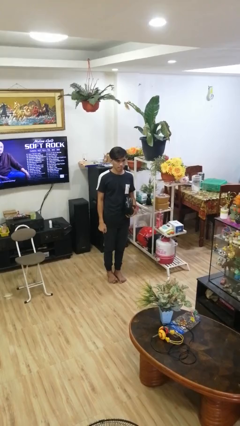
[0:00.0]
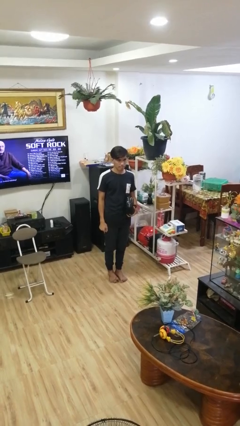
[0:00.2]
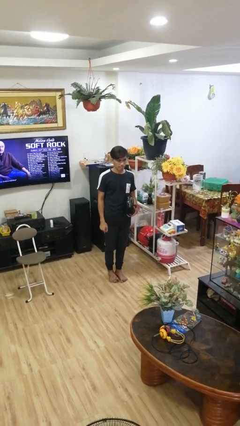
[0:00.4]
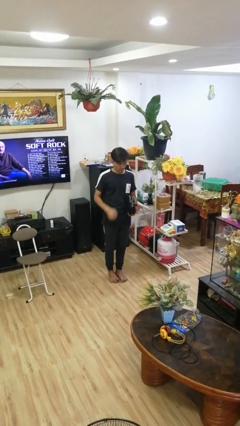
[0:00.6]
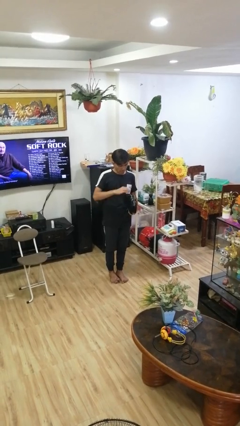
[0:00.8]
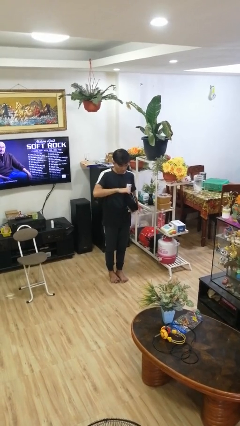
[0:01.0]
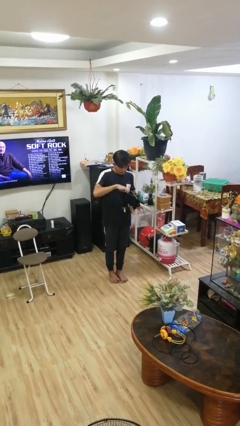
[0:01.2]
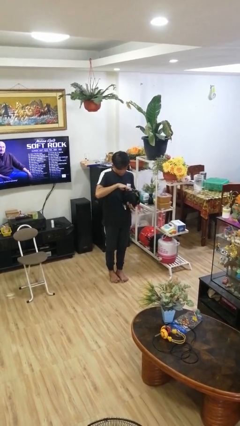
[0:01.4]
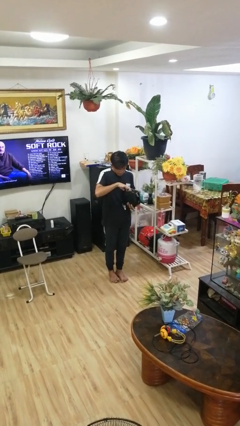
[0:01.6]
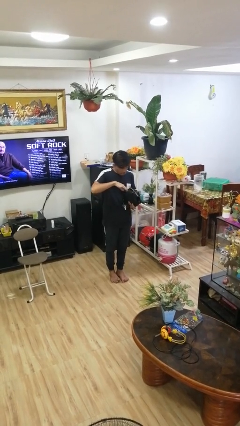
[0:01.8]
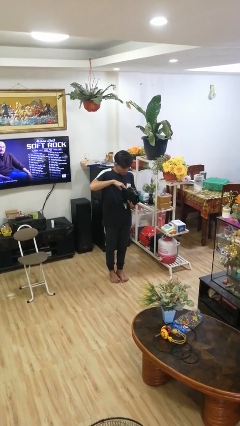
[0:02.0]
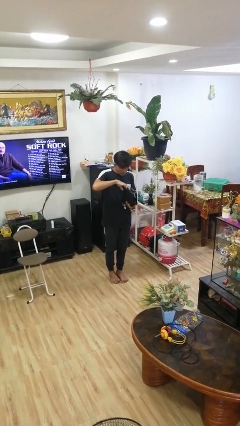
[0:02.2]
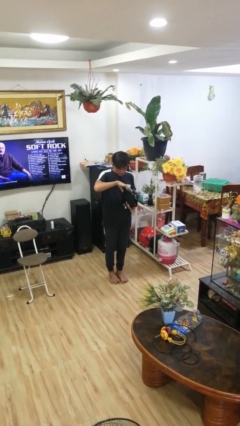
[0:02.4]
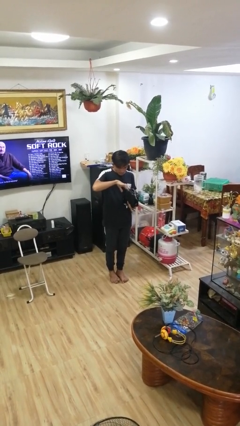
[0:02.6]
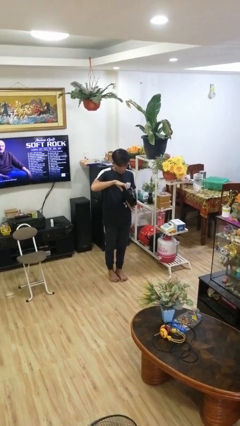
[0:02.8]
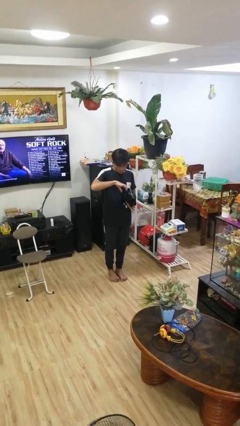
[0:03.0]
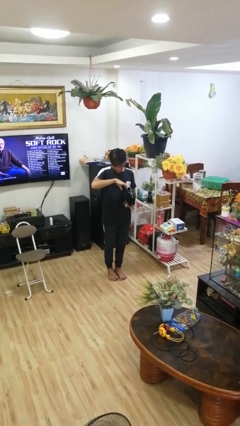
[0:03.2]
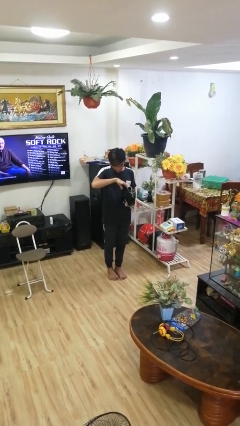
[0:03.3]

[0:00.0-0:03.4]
person searches in purse

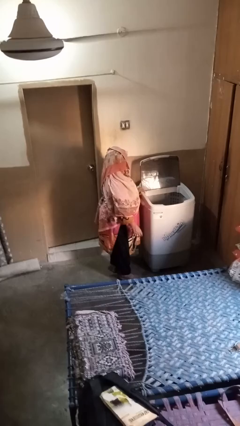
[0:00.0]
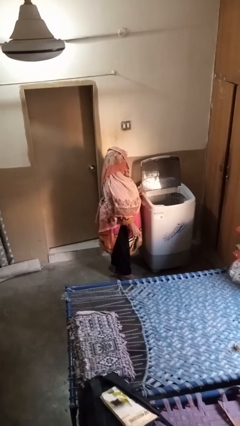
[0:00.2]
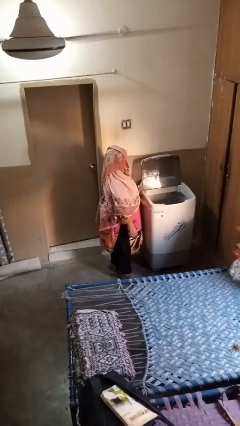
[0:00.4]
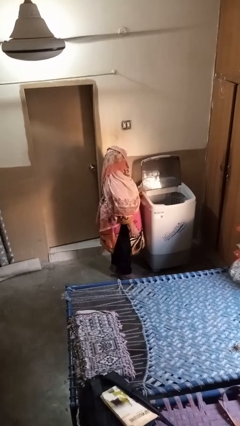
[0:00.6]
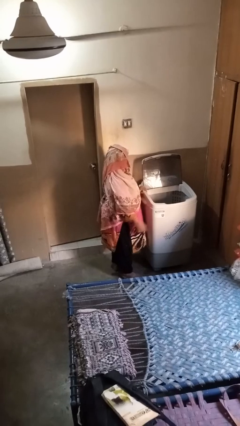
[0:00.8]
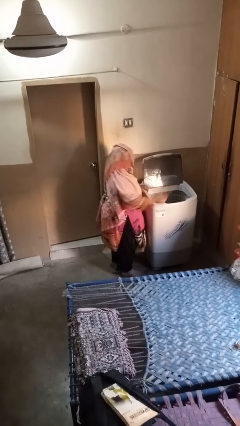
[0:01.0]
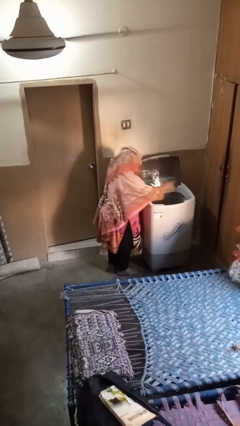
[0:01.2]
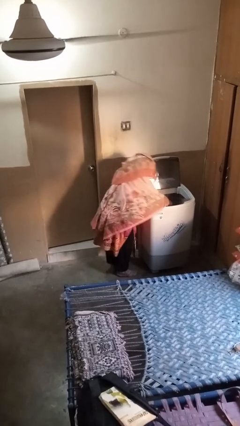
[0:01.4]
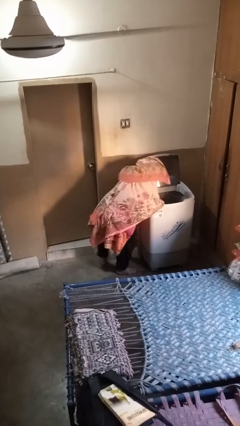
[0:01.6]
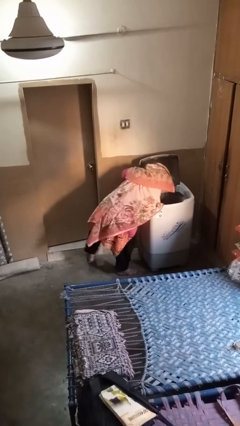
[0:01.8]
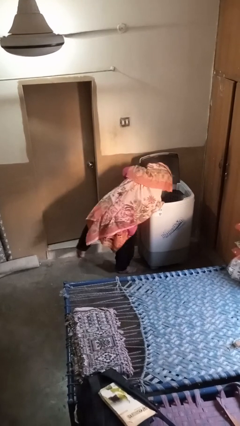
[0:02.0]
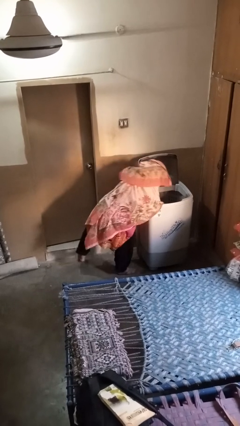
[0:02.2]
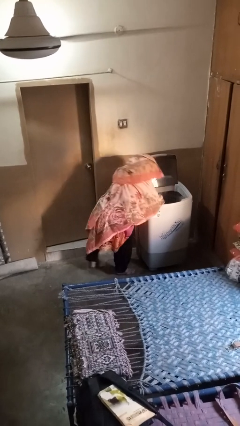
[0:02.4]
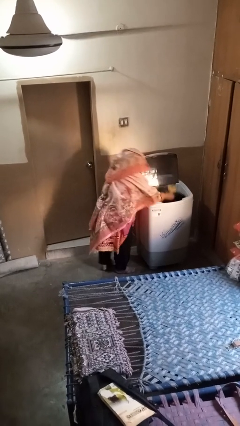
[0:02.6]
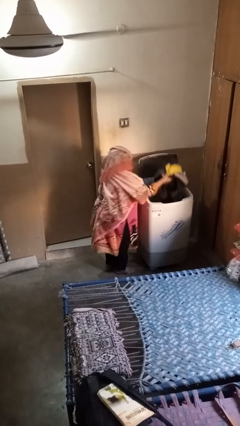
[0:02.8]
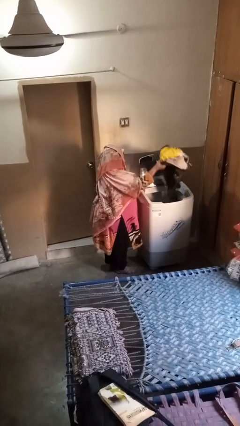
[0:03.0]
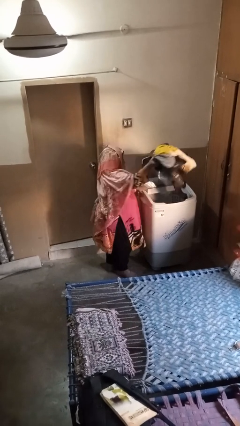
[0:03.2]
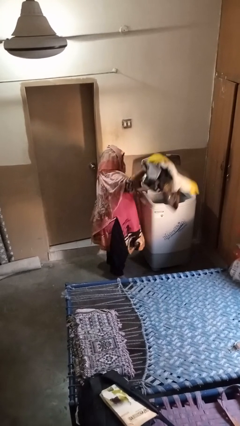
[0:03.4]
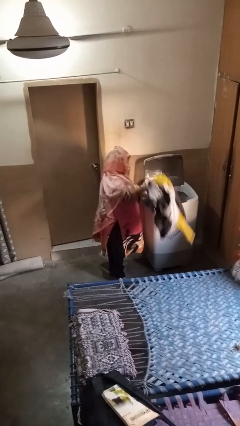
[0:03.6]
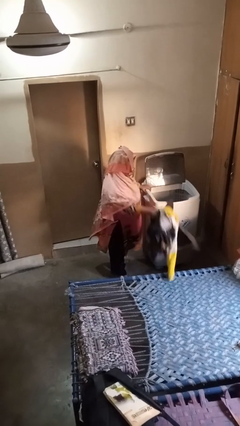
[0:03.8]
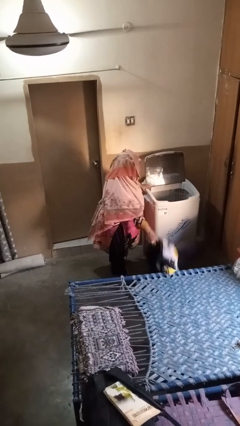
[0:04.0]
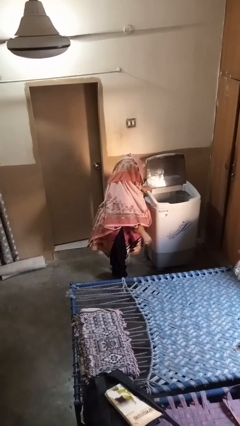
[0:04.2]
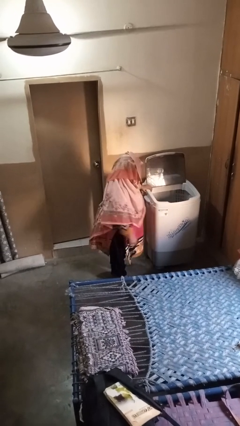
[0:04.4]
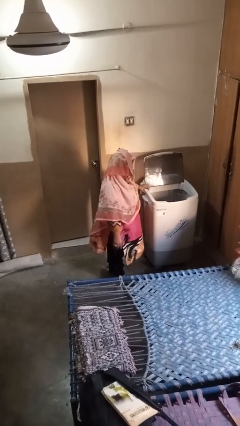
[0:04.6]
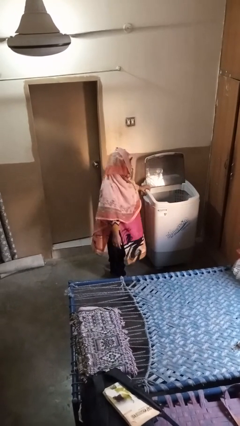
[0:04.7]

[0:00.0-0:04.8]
person unloads clotheswasher

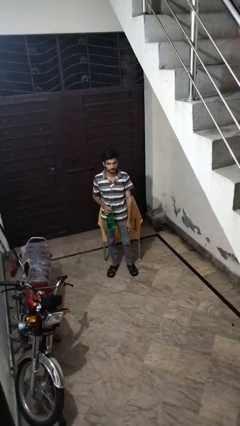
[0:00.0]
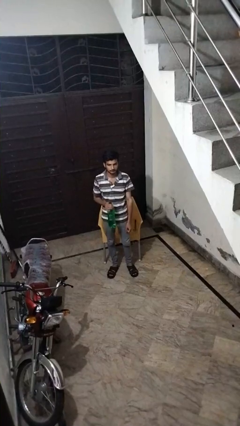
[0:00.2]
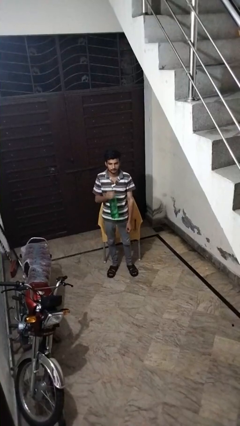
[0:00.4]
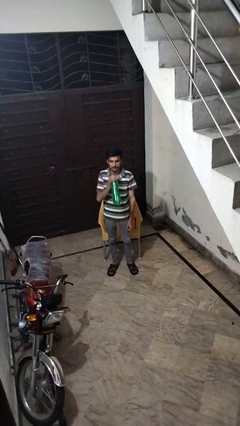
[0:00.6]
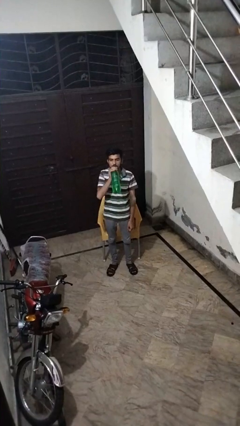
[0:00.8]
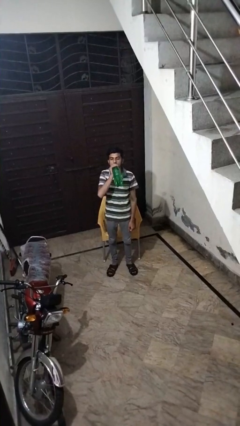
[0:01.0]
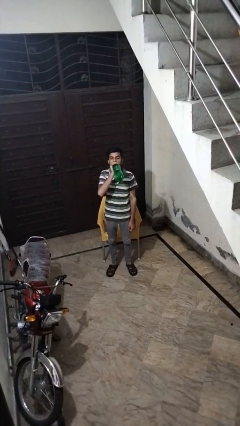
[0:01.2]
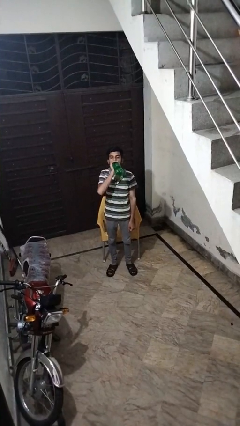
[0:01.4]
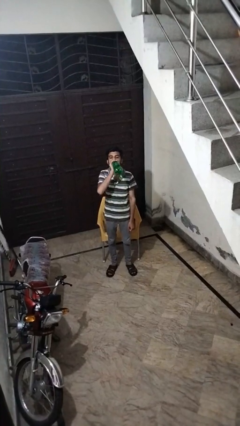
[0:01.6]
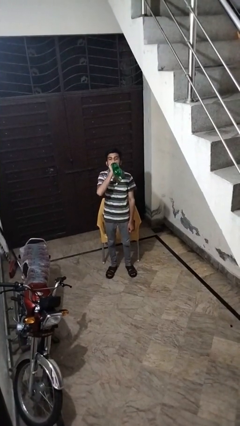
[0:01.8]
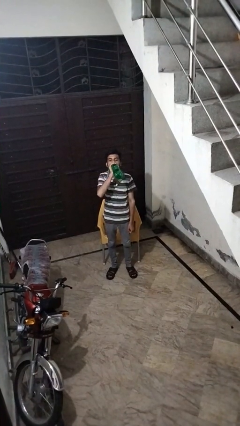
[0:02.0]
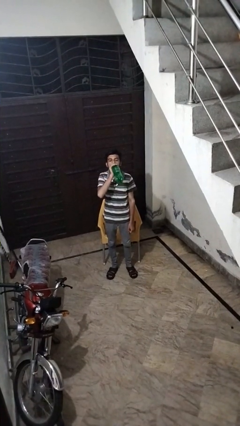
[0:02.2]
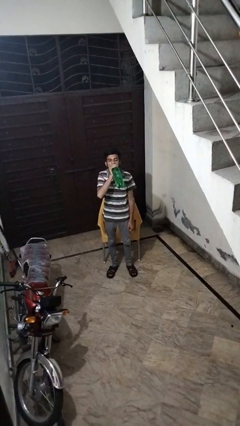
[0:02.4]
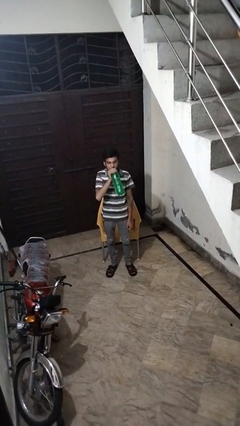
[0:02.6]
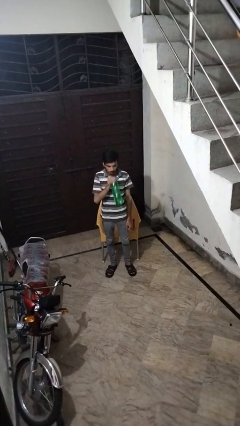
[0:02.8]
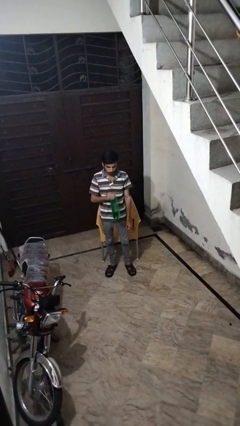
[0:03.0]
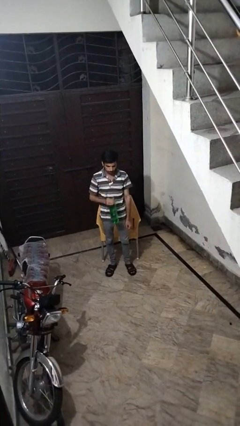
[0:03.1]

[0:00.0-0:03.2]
person drinks from bottle

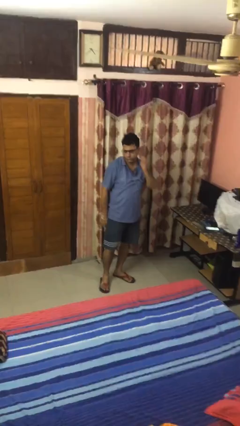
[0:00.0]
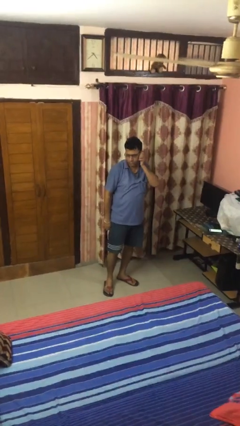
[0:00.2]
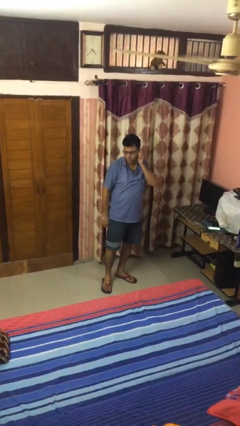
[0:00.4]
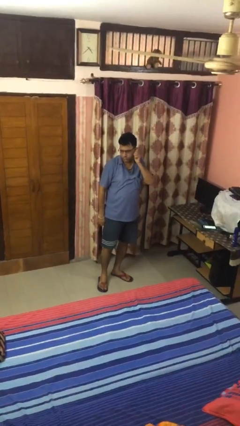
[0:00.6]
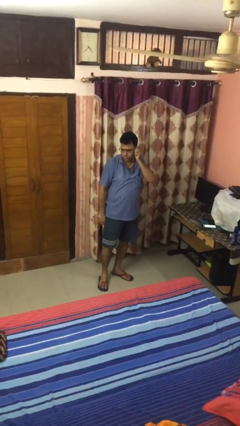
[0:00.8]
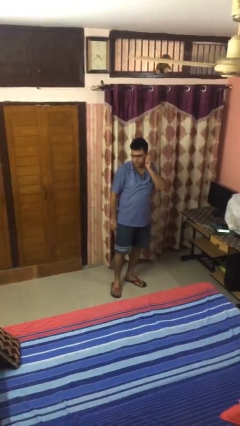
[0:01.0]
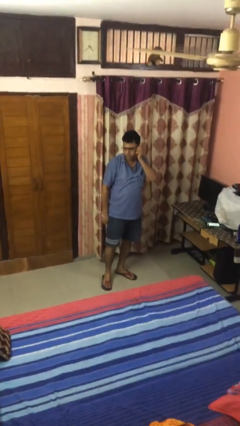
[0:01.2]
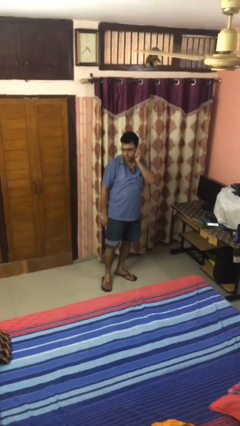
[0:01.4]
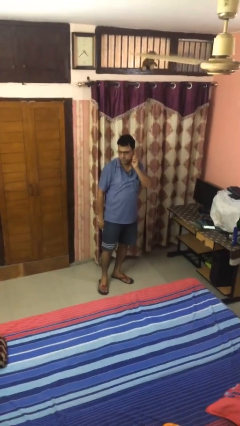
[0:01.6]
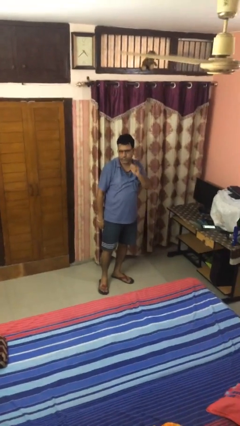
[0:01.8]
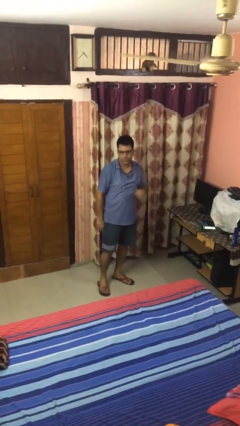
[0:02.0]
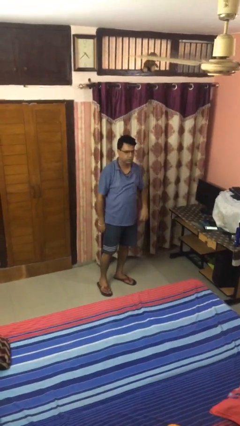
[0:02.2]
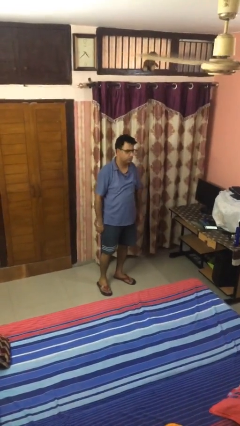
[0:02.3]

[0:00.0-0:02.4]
person touches earlobe

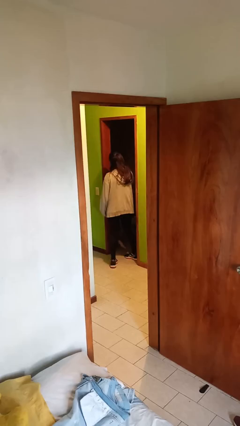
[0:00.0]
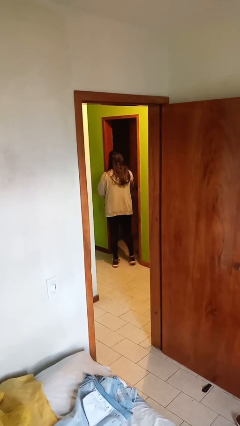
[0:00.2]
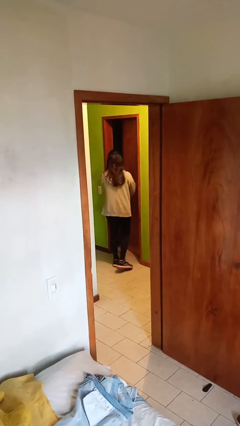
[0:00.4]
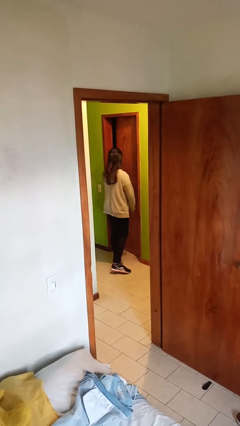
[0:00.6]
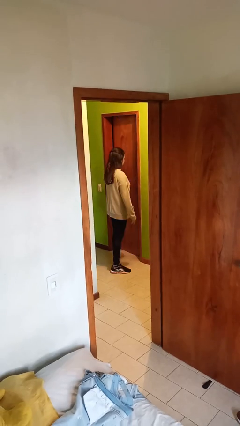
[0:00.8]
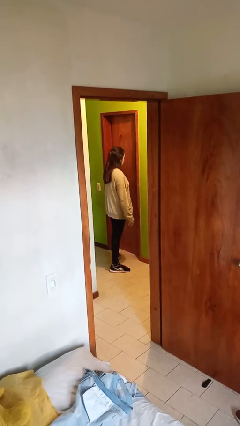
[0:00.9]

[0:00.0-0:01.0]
person closes facility door

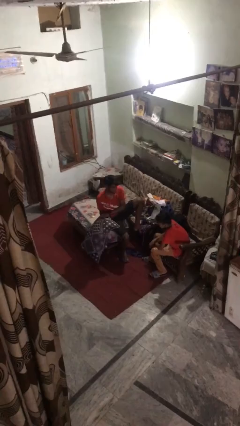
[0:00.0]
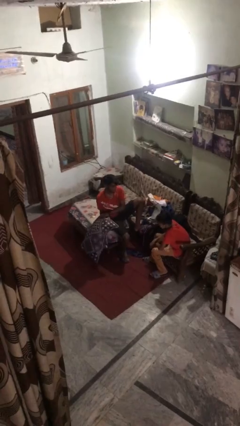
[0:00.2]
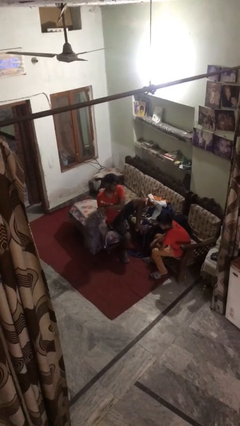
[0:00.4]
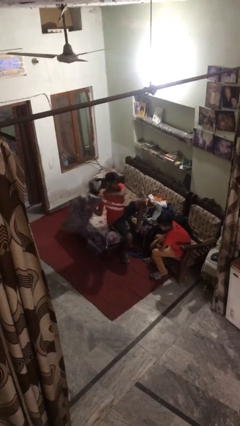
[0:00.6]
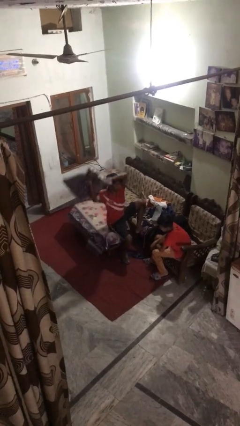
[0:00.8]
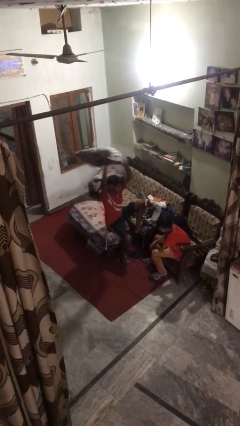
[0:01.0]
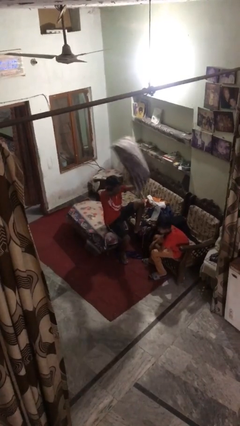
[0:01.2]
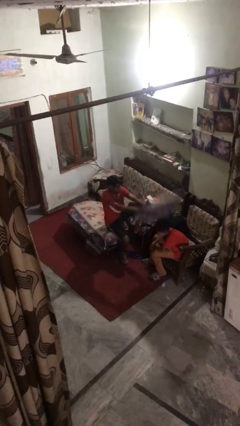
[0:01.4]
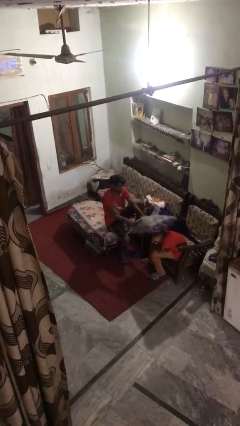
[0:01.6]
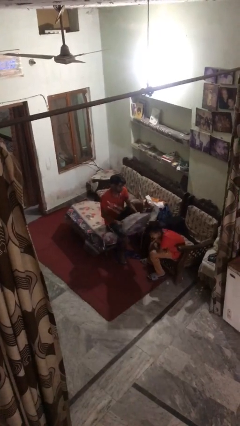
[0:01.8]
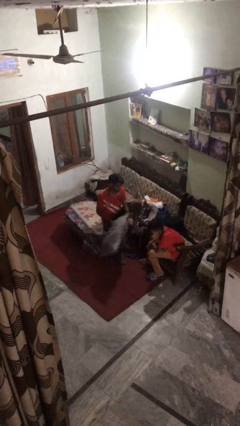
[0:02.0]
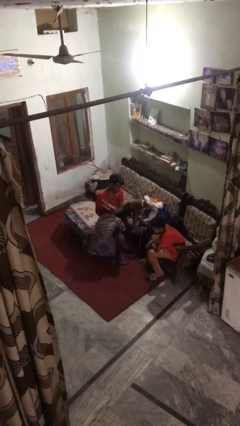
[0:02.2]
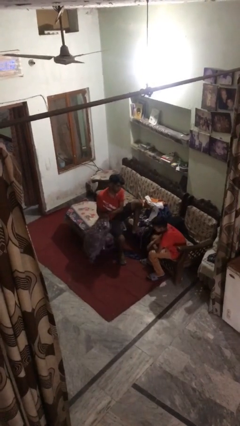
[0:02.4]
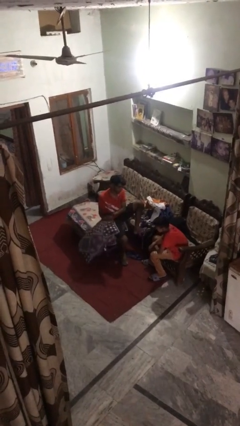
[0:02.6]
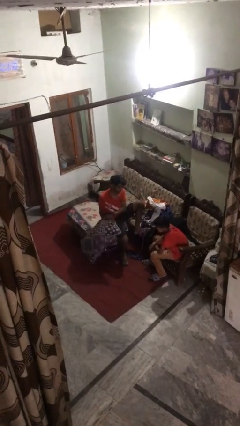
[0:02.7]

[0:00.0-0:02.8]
person hits person with pillow
